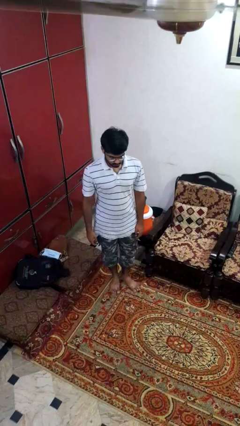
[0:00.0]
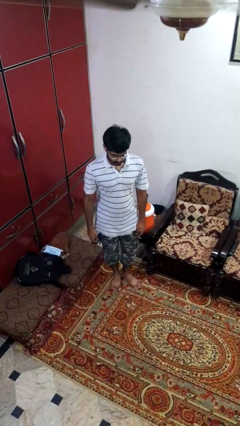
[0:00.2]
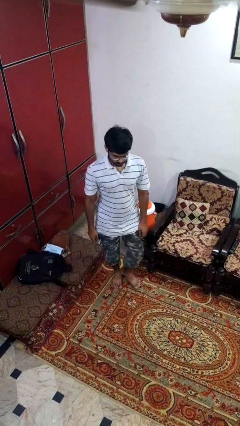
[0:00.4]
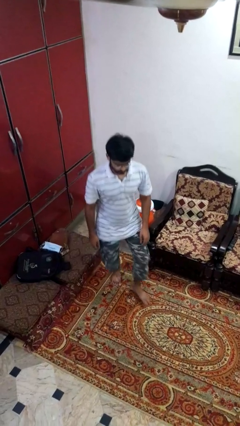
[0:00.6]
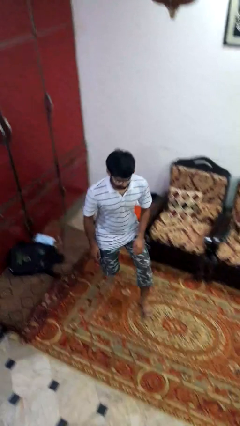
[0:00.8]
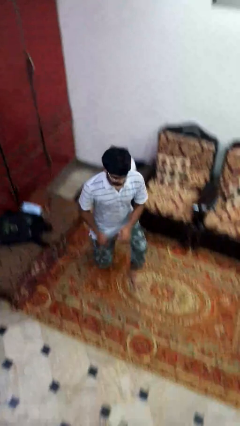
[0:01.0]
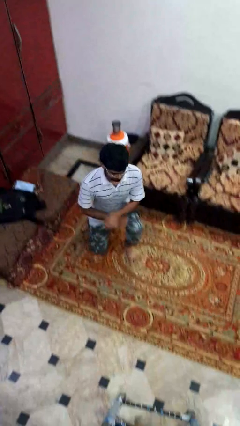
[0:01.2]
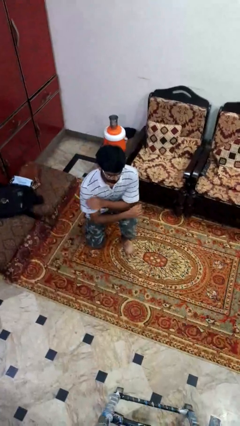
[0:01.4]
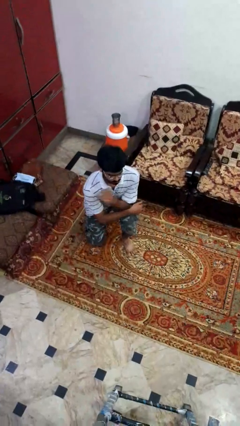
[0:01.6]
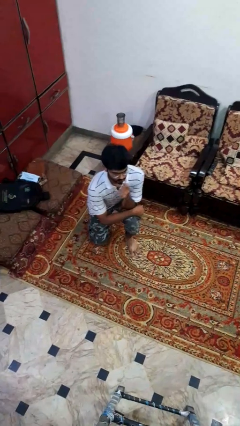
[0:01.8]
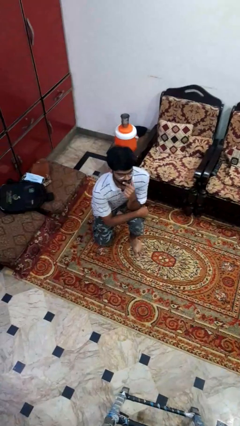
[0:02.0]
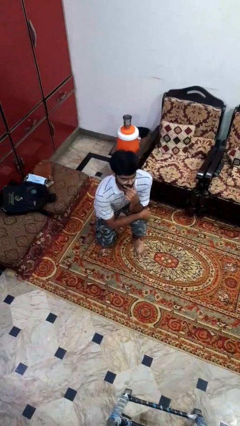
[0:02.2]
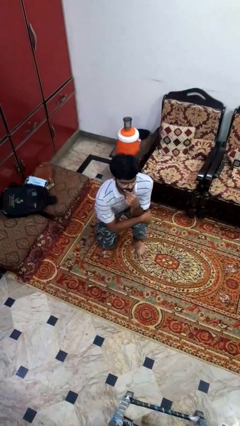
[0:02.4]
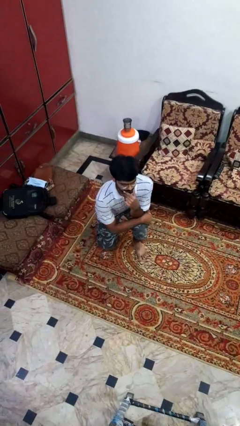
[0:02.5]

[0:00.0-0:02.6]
person kneels

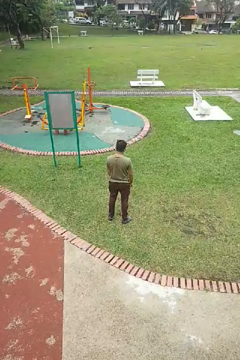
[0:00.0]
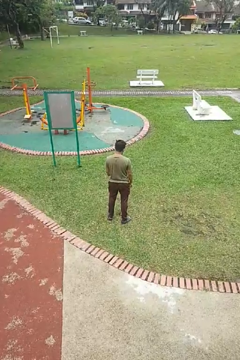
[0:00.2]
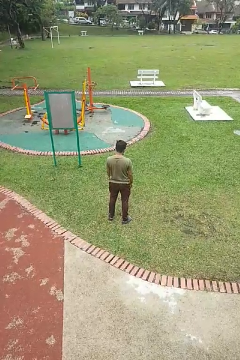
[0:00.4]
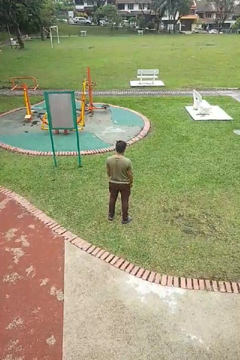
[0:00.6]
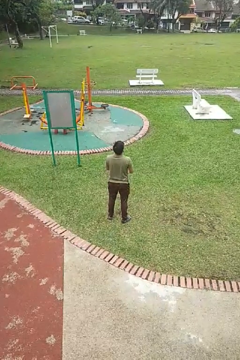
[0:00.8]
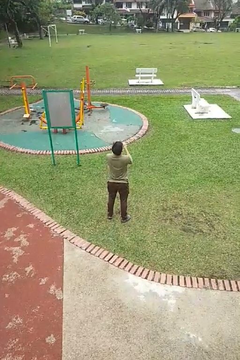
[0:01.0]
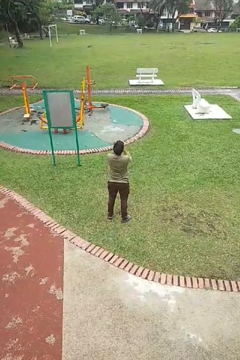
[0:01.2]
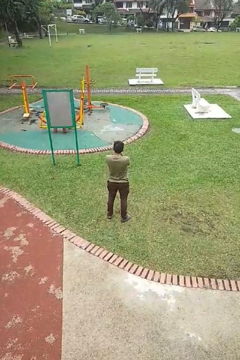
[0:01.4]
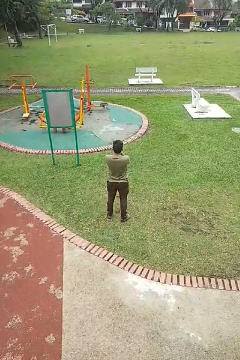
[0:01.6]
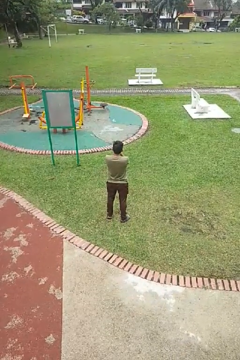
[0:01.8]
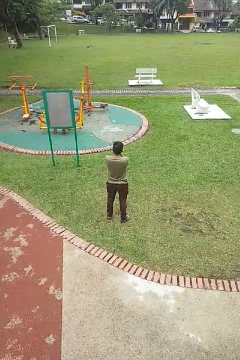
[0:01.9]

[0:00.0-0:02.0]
person sneezes into hand

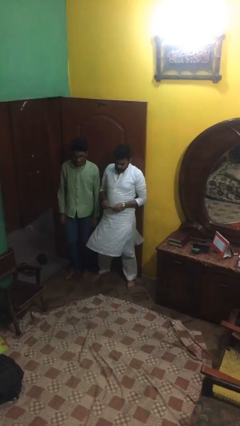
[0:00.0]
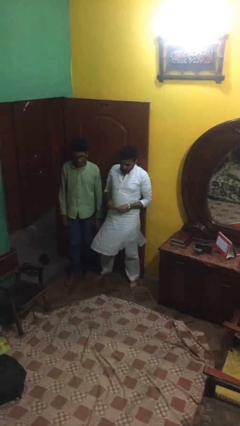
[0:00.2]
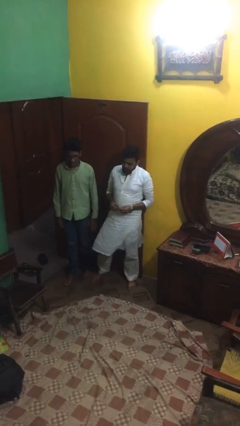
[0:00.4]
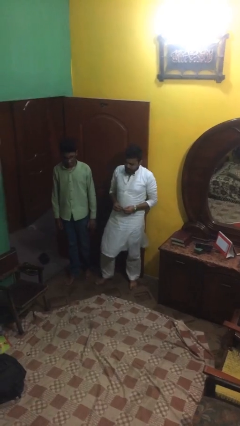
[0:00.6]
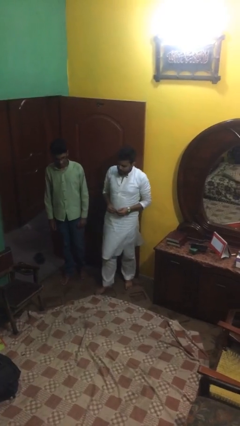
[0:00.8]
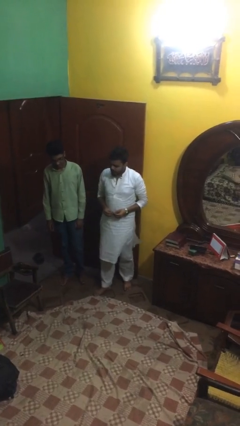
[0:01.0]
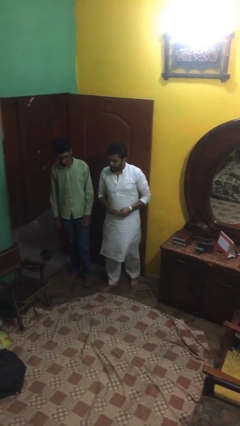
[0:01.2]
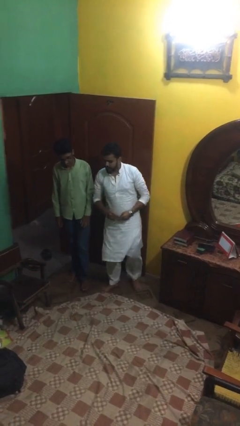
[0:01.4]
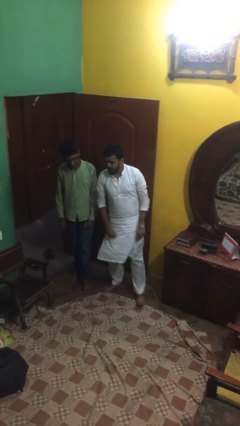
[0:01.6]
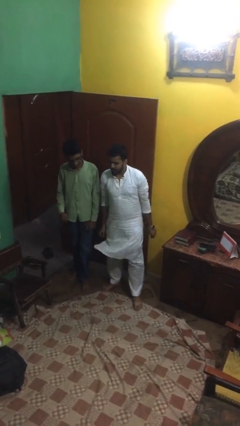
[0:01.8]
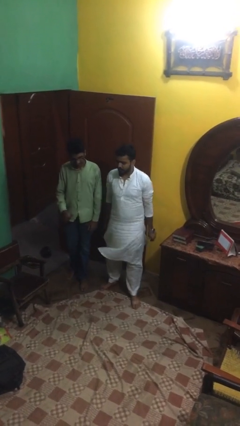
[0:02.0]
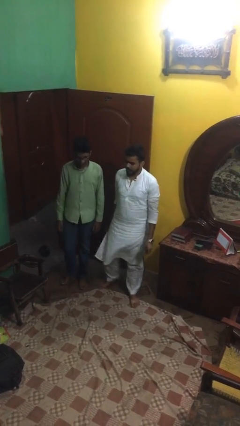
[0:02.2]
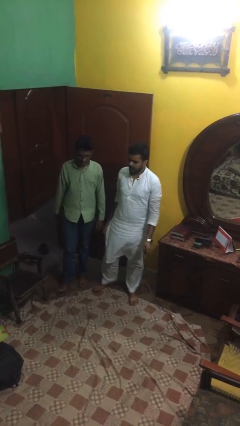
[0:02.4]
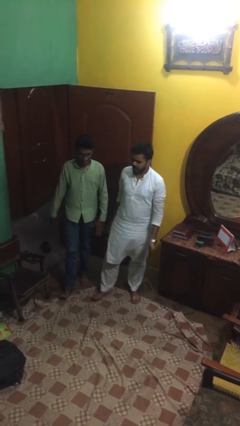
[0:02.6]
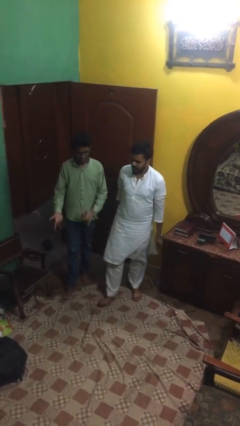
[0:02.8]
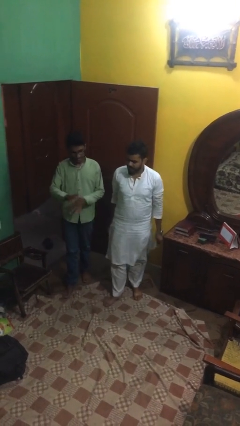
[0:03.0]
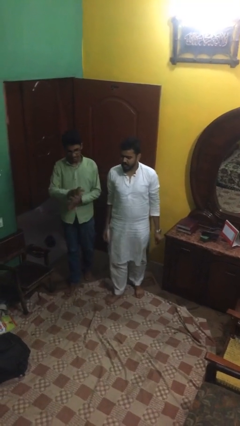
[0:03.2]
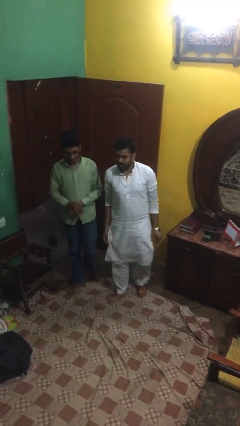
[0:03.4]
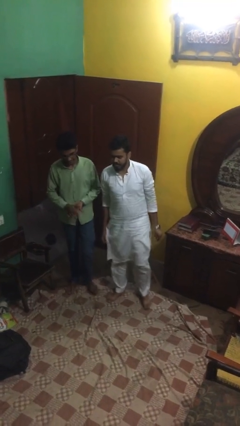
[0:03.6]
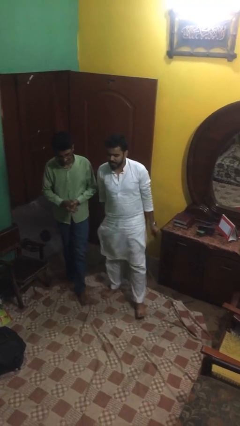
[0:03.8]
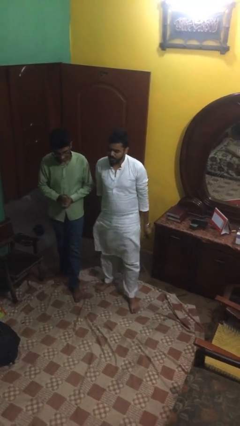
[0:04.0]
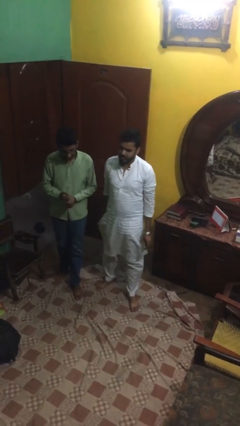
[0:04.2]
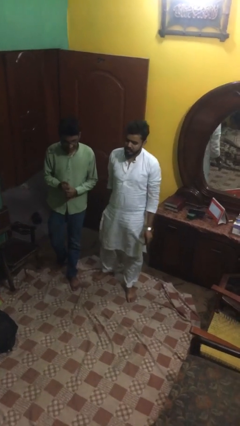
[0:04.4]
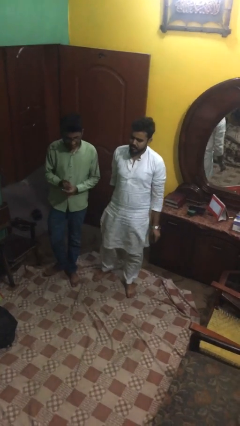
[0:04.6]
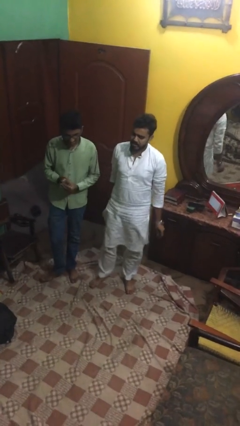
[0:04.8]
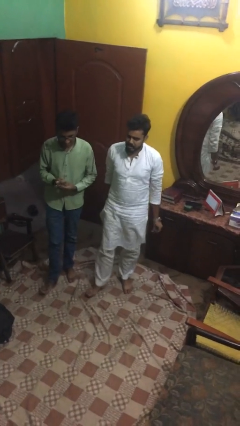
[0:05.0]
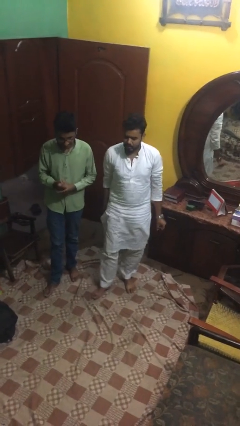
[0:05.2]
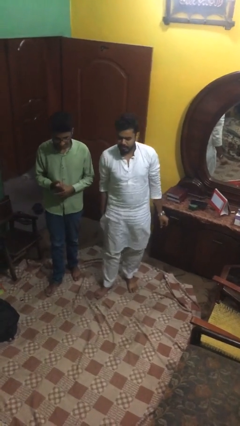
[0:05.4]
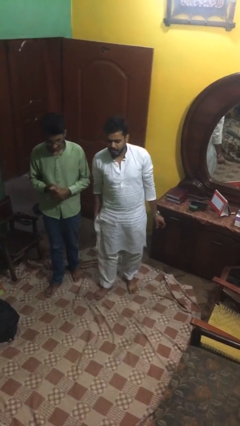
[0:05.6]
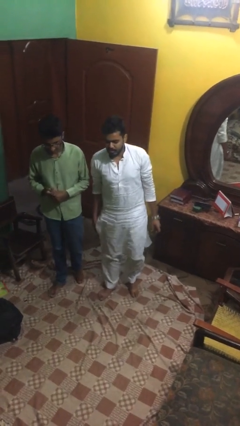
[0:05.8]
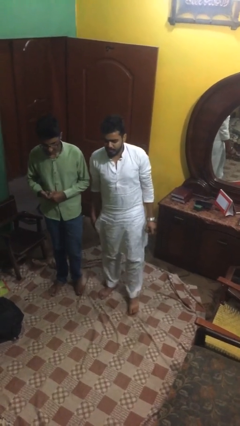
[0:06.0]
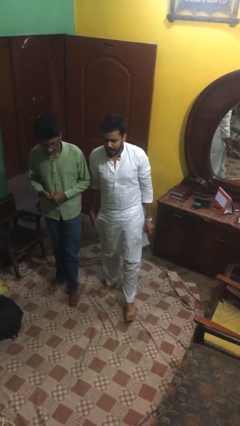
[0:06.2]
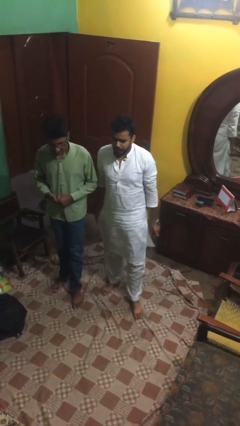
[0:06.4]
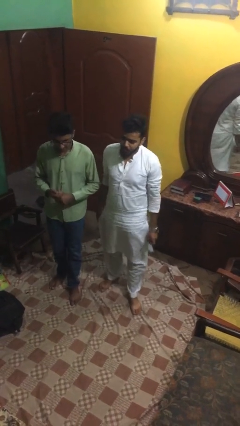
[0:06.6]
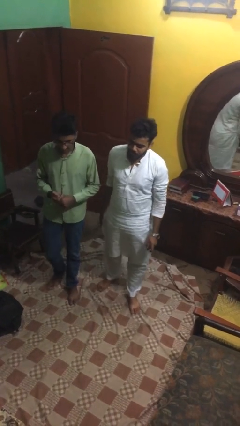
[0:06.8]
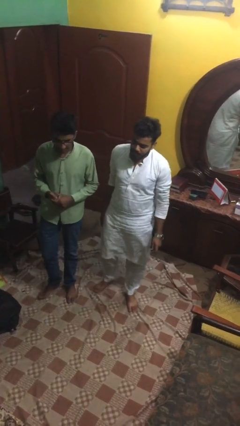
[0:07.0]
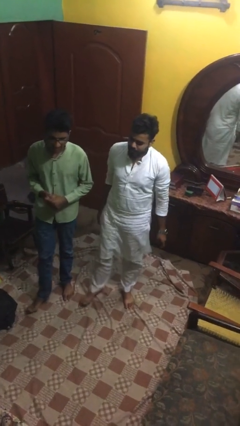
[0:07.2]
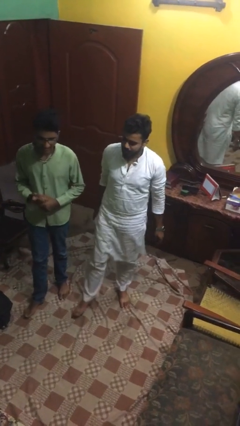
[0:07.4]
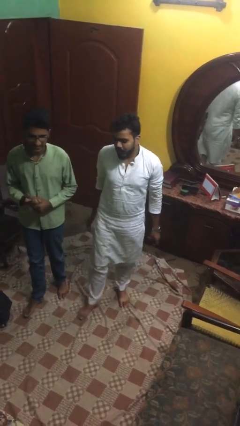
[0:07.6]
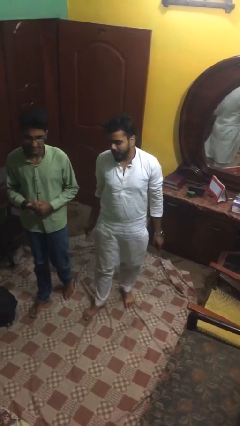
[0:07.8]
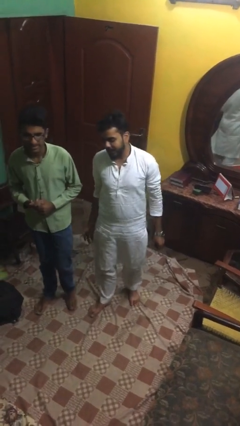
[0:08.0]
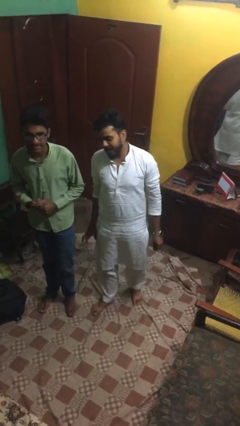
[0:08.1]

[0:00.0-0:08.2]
person talks to person

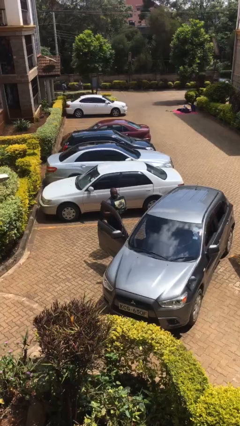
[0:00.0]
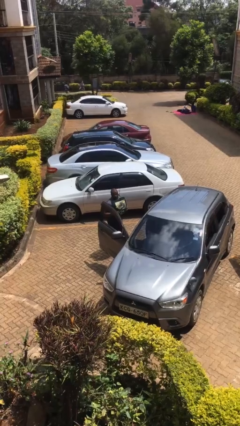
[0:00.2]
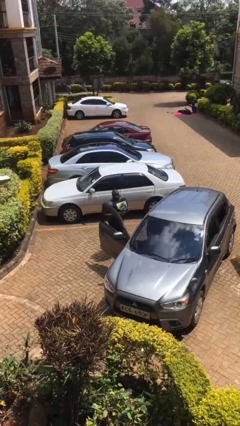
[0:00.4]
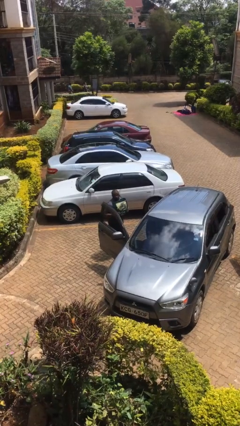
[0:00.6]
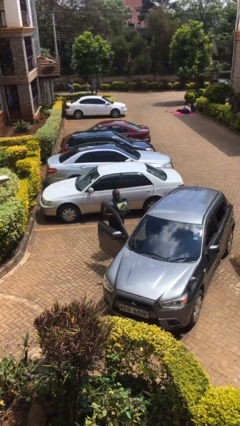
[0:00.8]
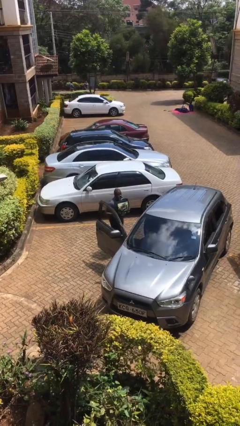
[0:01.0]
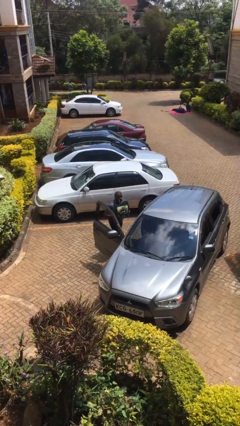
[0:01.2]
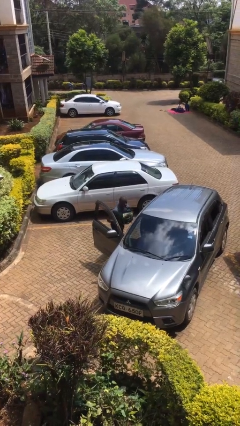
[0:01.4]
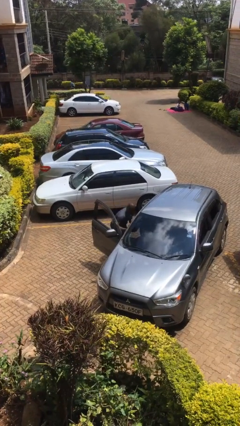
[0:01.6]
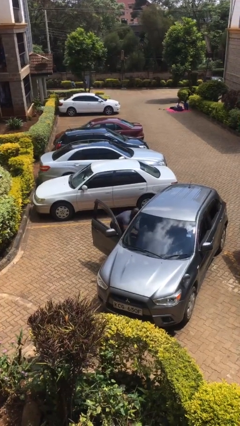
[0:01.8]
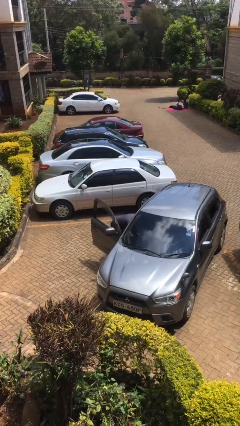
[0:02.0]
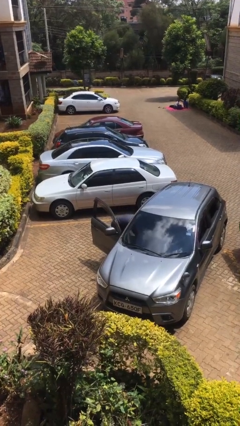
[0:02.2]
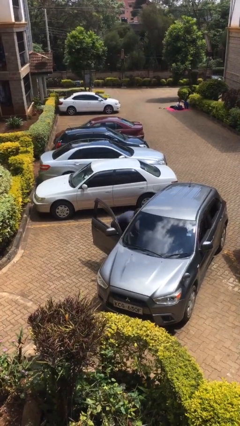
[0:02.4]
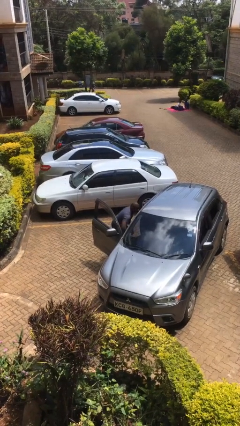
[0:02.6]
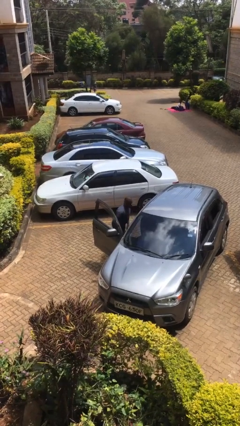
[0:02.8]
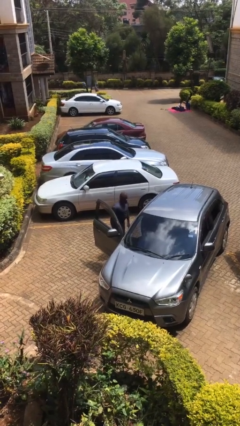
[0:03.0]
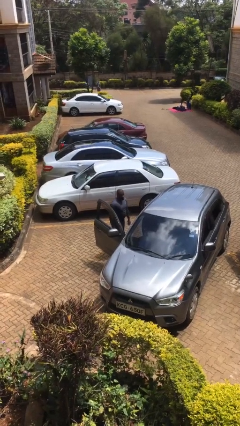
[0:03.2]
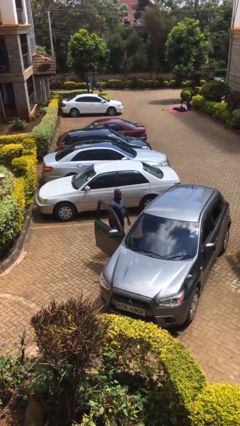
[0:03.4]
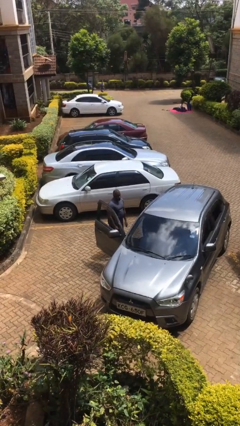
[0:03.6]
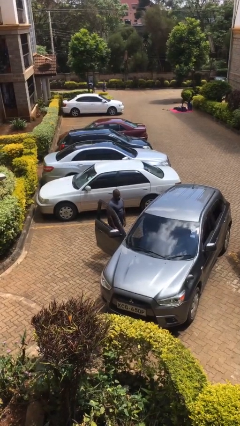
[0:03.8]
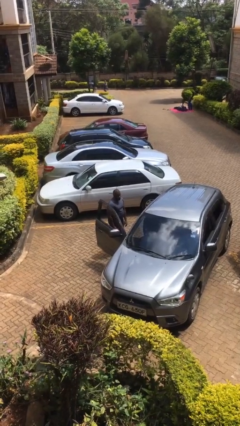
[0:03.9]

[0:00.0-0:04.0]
person loads car

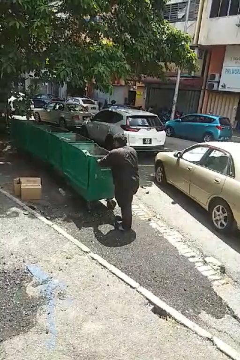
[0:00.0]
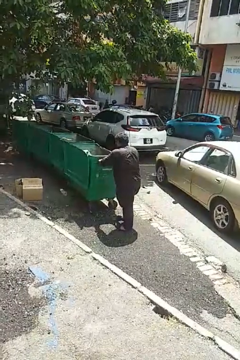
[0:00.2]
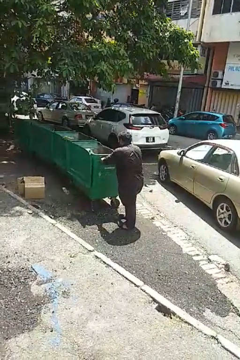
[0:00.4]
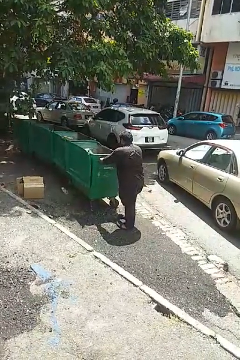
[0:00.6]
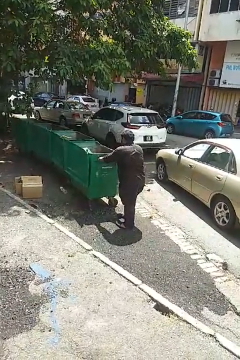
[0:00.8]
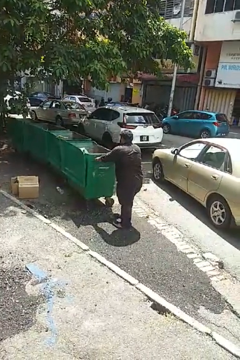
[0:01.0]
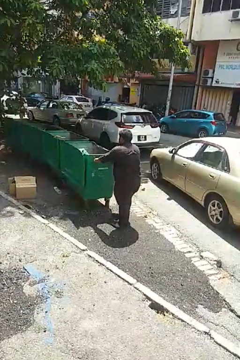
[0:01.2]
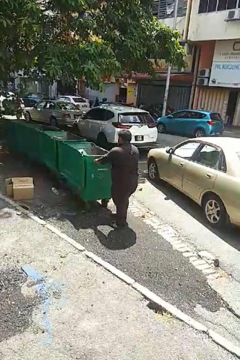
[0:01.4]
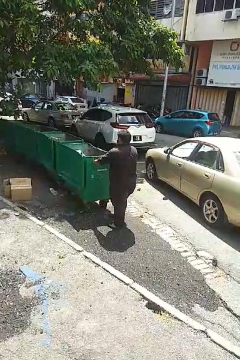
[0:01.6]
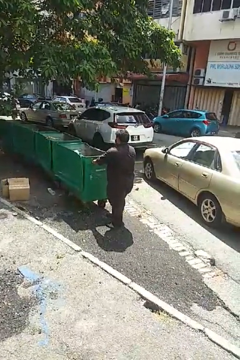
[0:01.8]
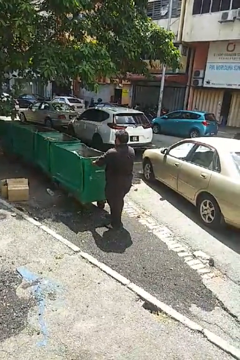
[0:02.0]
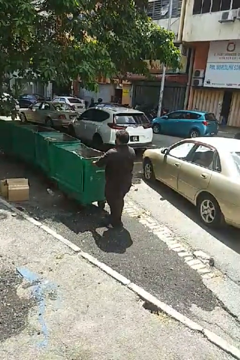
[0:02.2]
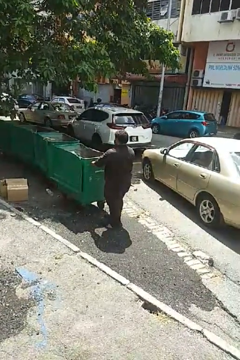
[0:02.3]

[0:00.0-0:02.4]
person pulls wheeled trashcan
